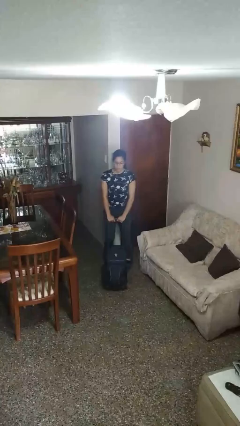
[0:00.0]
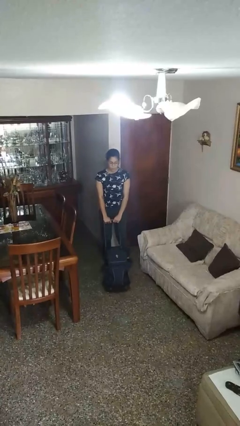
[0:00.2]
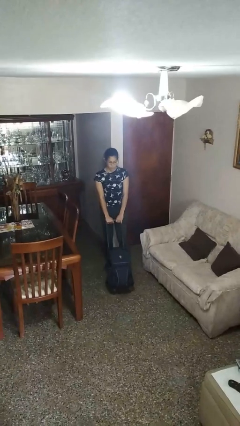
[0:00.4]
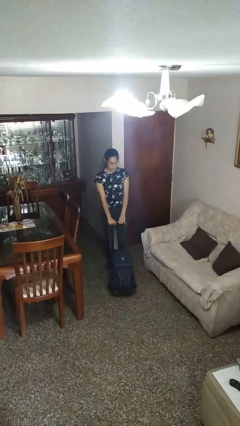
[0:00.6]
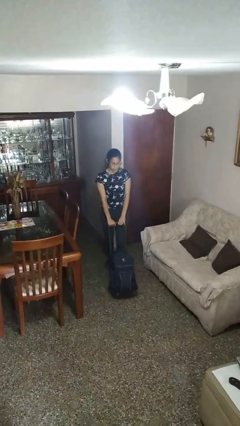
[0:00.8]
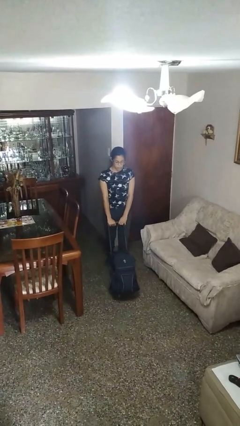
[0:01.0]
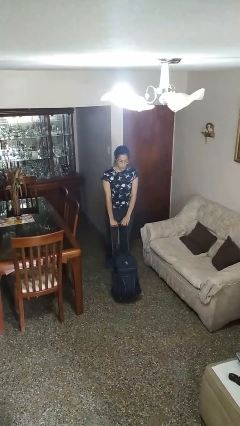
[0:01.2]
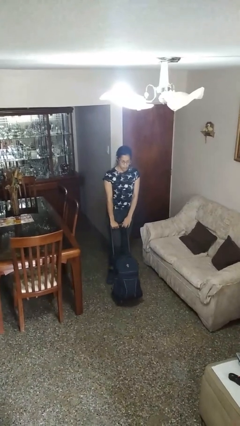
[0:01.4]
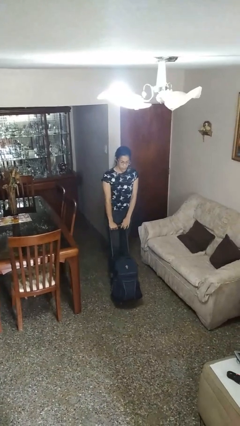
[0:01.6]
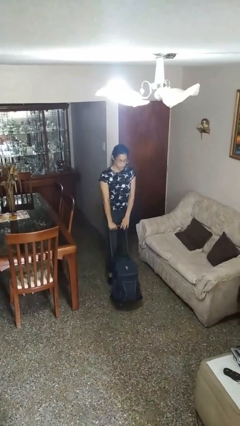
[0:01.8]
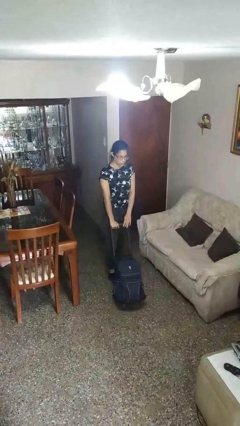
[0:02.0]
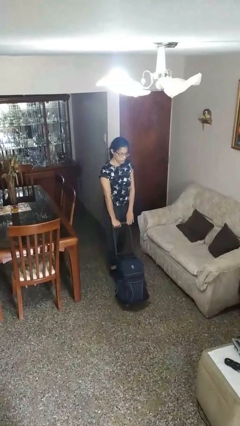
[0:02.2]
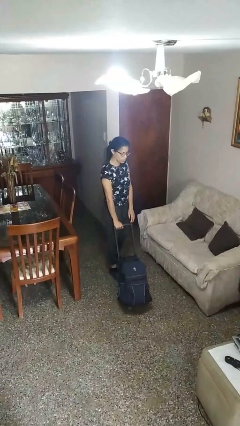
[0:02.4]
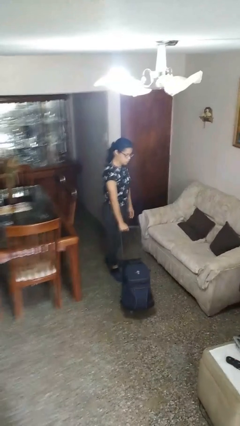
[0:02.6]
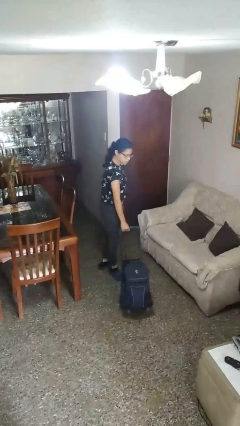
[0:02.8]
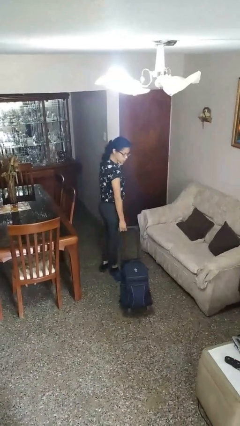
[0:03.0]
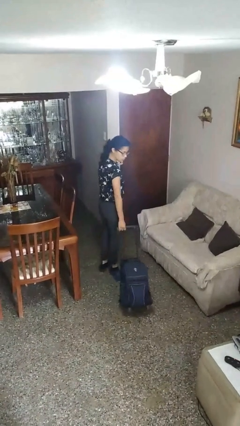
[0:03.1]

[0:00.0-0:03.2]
person pushes wheeled cart

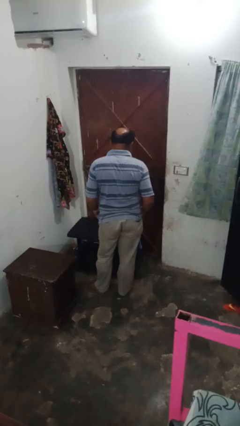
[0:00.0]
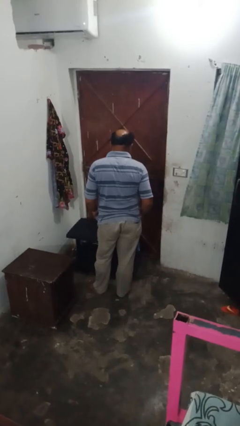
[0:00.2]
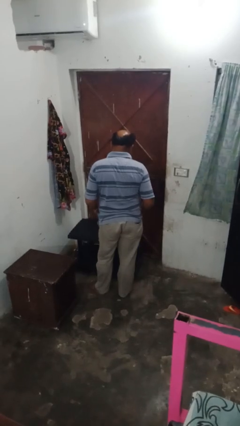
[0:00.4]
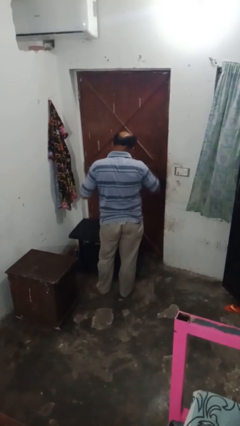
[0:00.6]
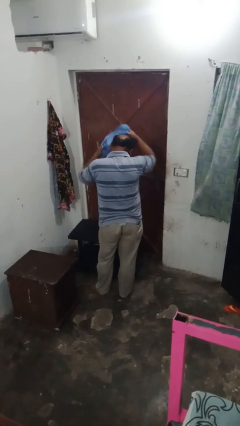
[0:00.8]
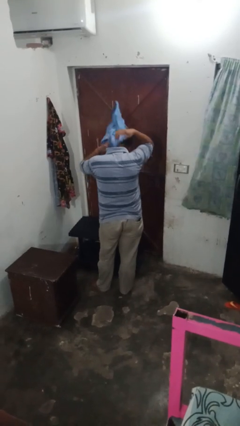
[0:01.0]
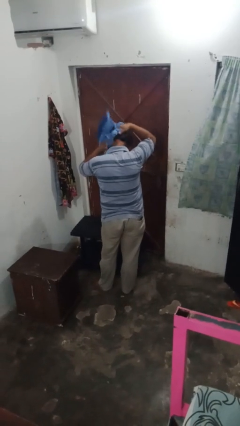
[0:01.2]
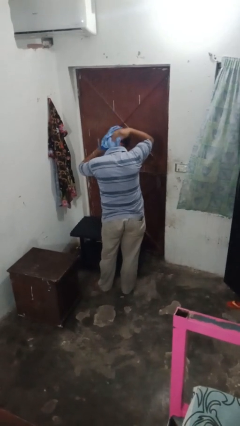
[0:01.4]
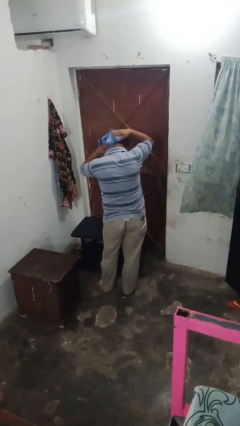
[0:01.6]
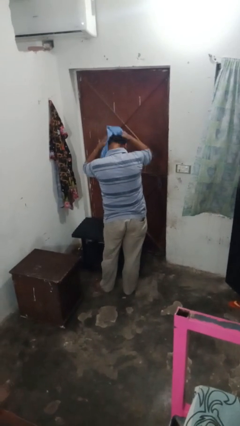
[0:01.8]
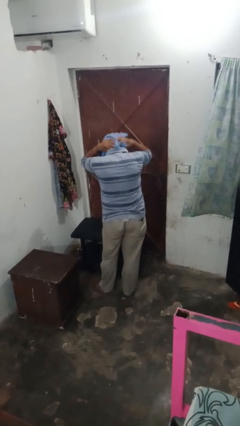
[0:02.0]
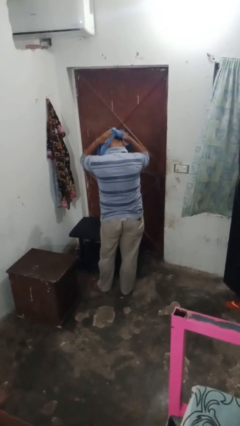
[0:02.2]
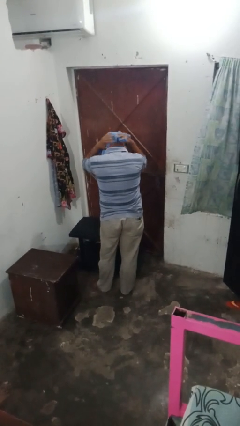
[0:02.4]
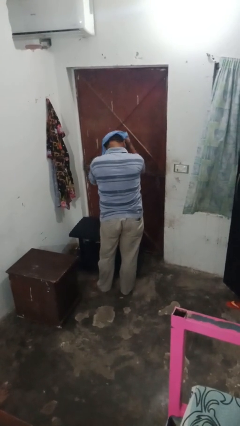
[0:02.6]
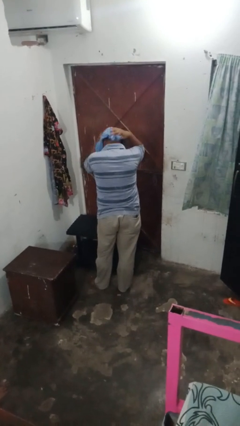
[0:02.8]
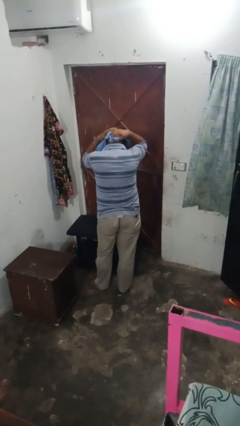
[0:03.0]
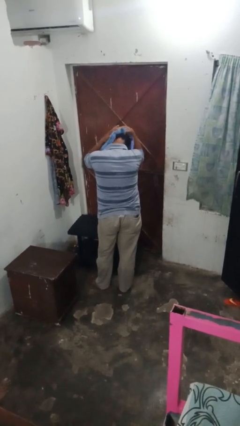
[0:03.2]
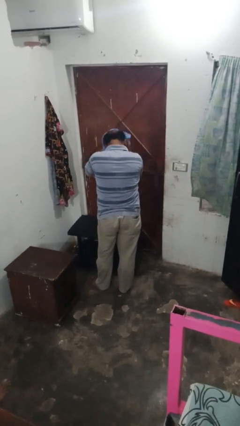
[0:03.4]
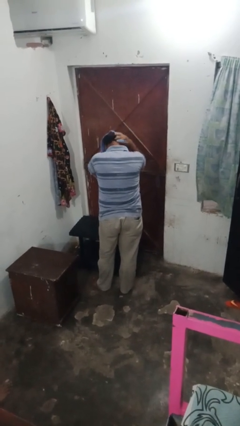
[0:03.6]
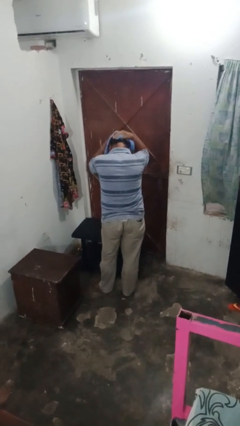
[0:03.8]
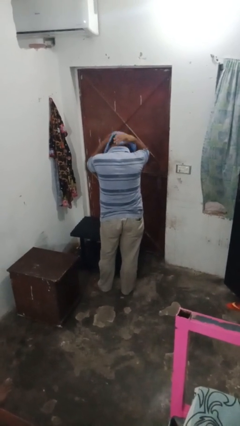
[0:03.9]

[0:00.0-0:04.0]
person dries hair with towel

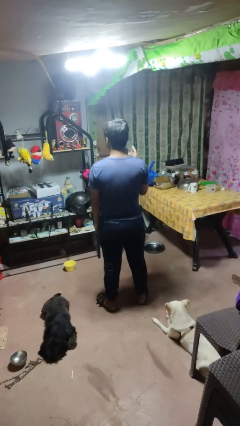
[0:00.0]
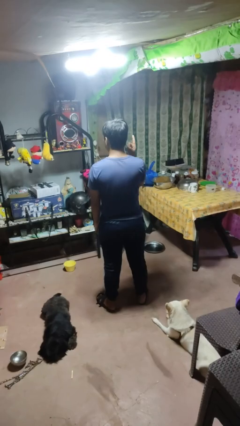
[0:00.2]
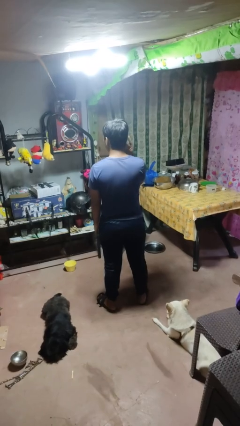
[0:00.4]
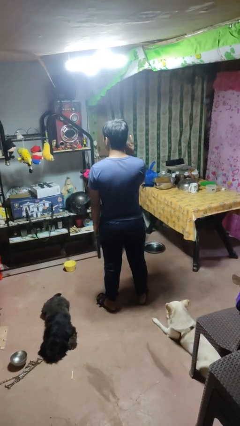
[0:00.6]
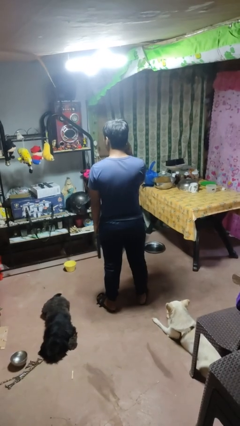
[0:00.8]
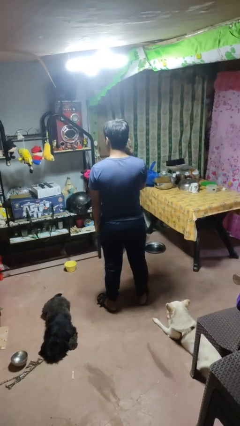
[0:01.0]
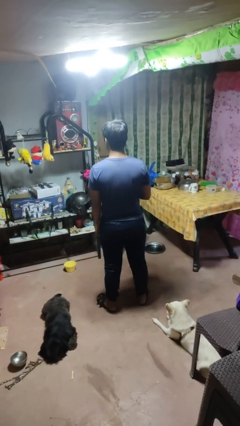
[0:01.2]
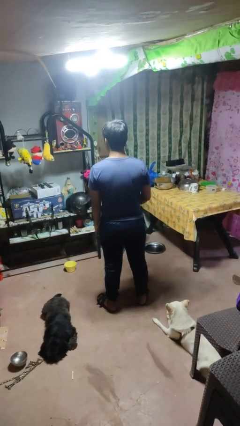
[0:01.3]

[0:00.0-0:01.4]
person gestures listen closely

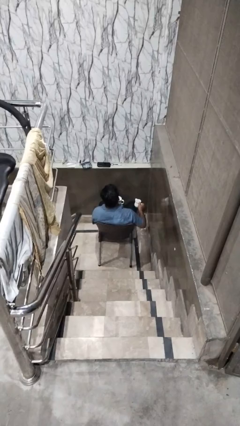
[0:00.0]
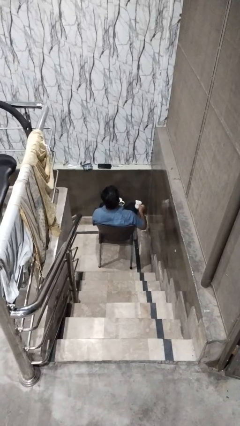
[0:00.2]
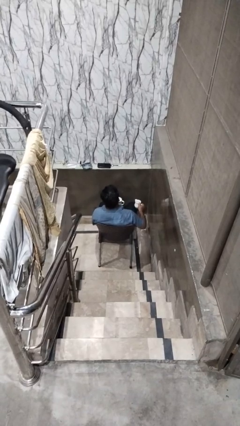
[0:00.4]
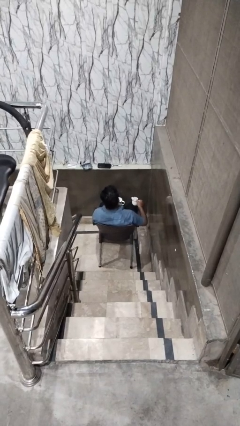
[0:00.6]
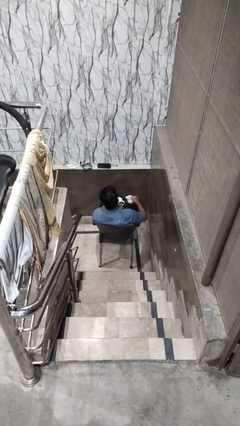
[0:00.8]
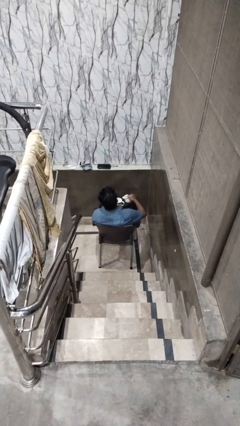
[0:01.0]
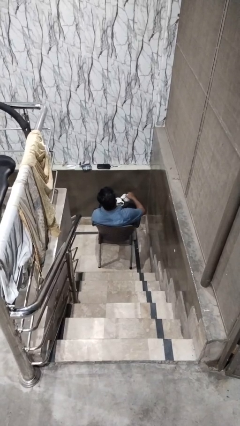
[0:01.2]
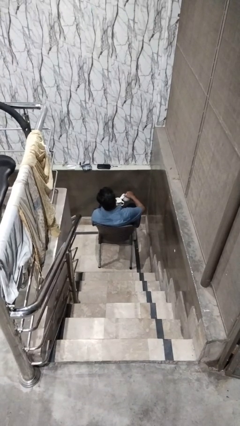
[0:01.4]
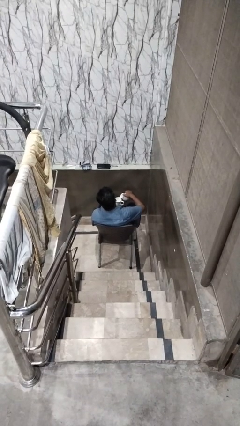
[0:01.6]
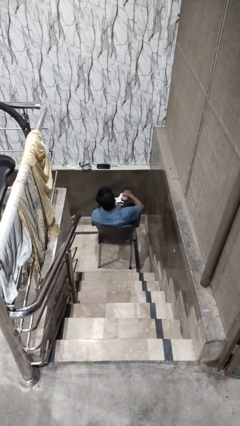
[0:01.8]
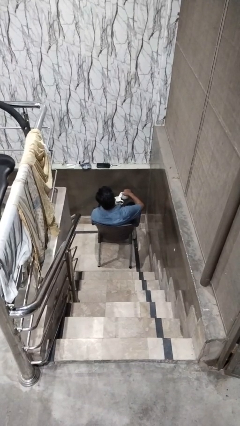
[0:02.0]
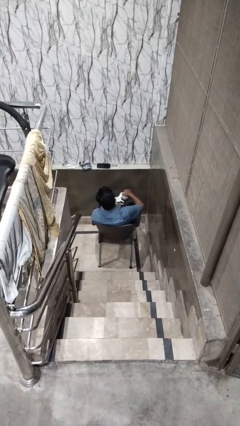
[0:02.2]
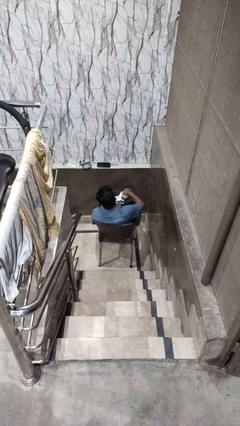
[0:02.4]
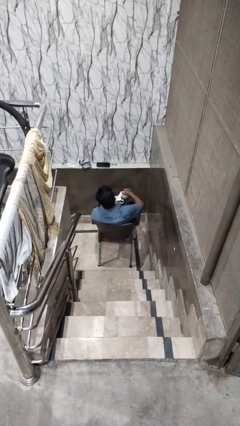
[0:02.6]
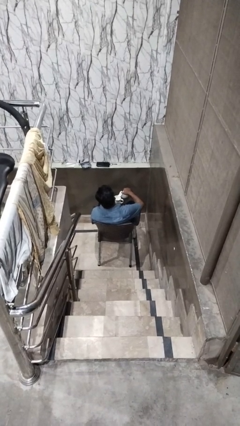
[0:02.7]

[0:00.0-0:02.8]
person pours coffee into mug

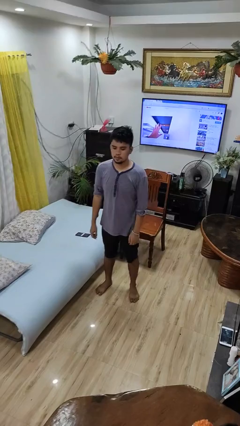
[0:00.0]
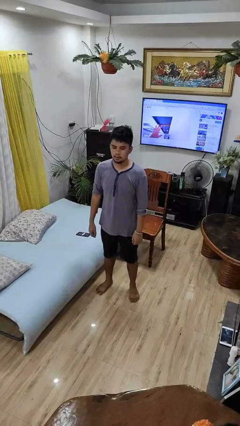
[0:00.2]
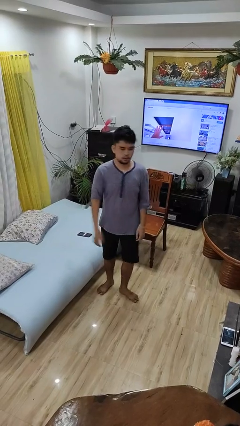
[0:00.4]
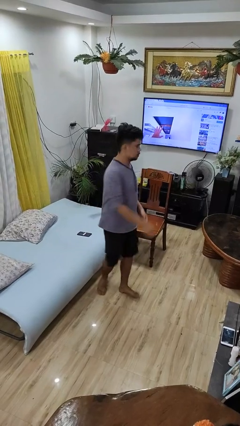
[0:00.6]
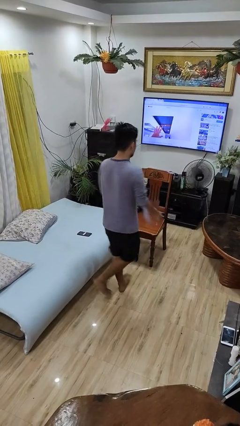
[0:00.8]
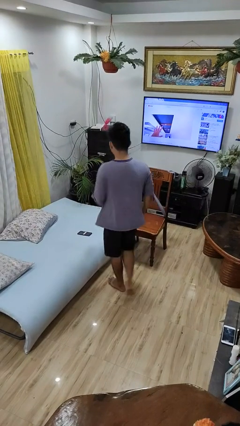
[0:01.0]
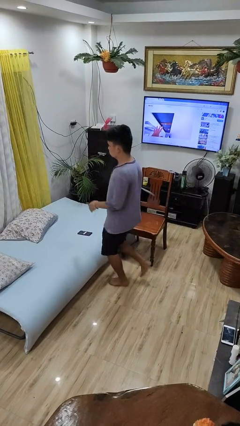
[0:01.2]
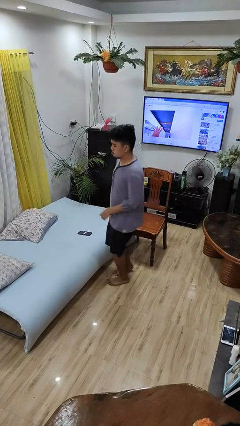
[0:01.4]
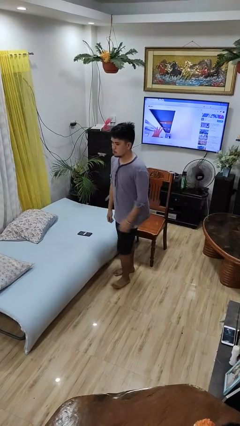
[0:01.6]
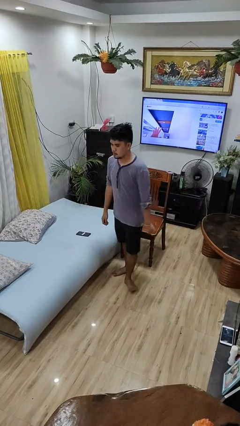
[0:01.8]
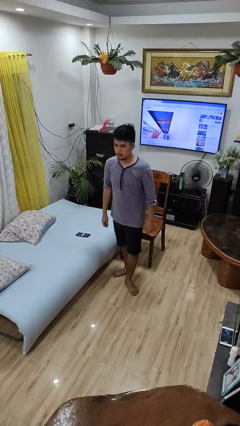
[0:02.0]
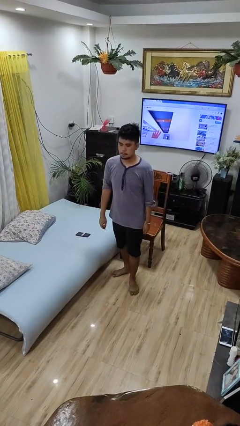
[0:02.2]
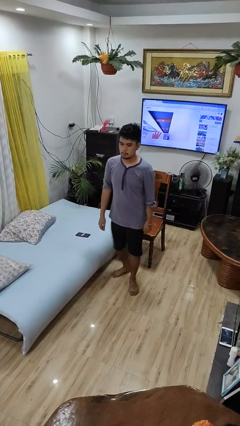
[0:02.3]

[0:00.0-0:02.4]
person twirls

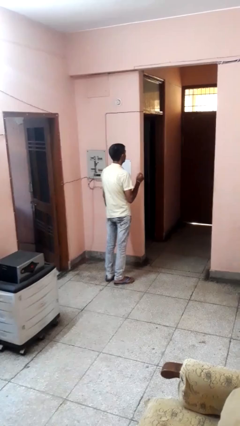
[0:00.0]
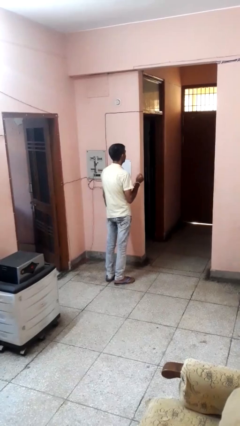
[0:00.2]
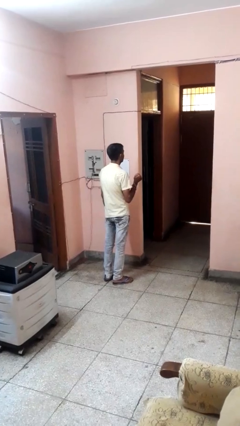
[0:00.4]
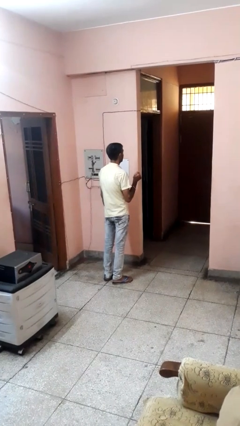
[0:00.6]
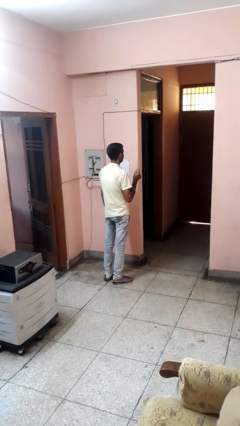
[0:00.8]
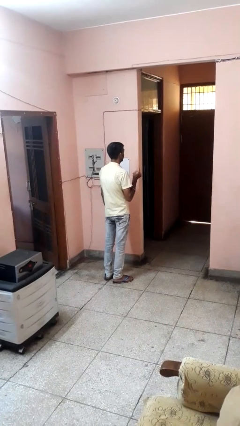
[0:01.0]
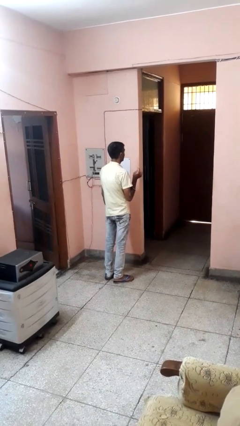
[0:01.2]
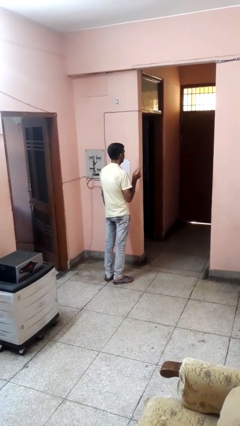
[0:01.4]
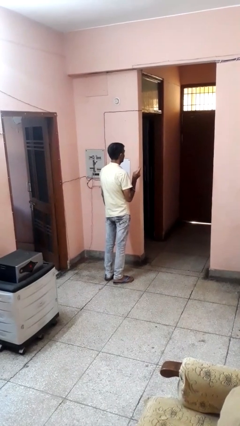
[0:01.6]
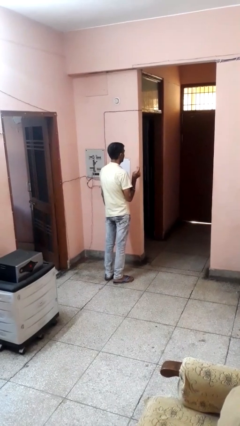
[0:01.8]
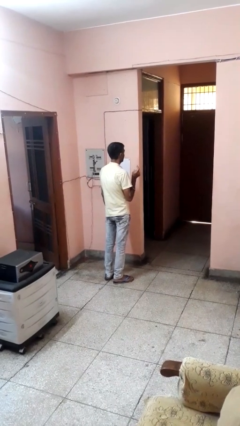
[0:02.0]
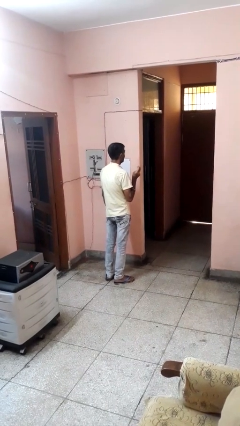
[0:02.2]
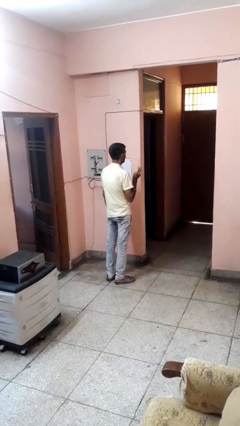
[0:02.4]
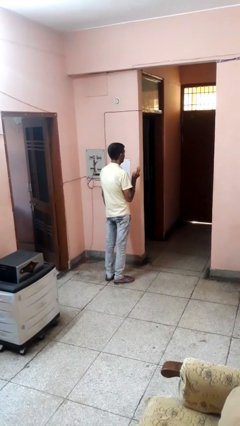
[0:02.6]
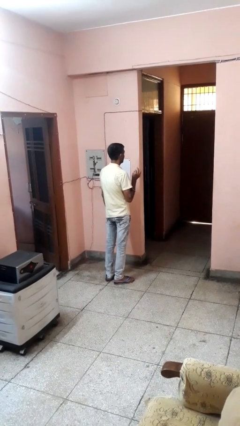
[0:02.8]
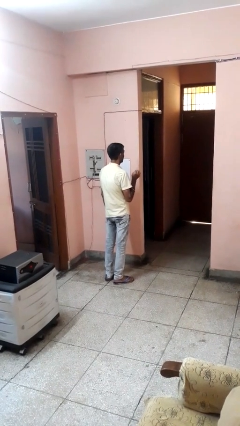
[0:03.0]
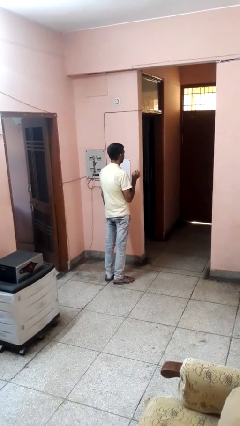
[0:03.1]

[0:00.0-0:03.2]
person cracks knuckles

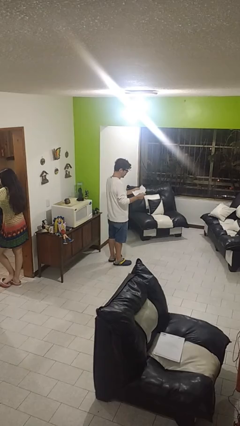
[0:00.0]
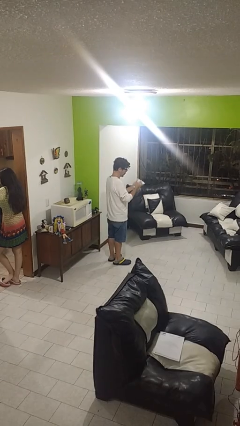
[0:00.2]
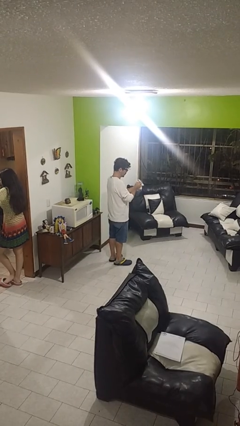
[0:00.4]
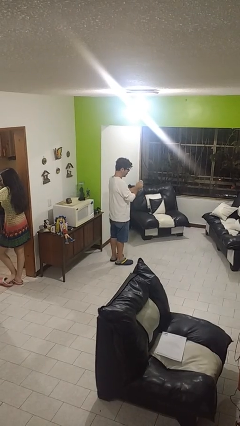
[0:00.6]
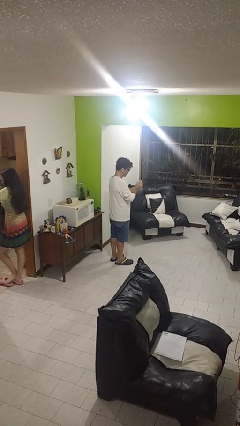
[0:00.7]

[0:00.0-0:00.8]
person crumples paper
